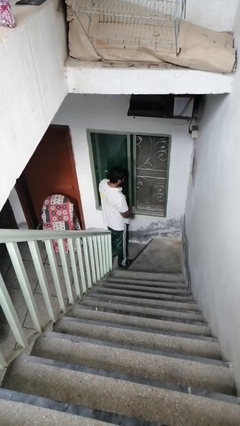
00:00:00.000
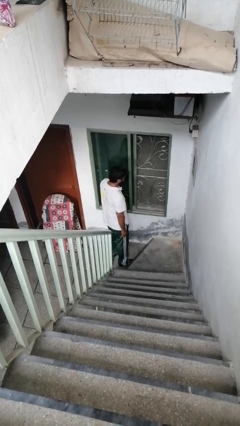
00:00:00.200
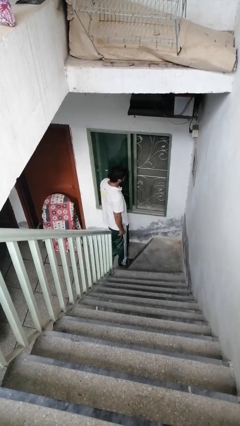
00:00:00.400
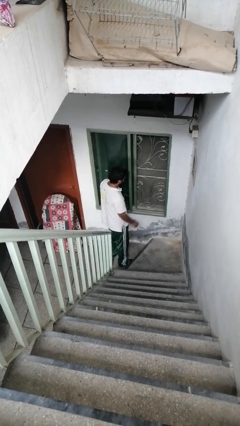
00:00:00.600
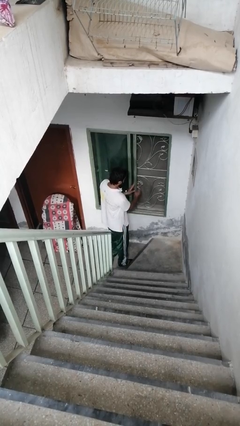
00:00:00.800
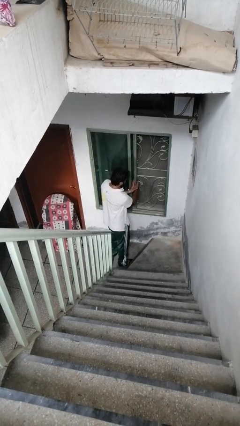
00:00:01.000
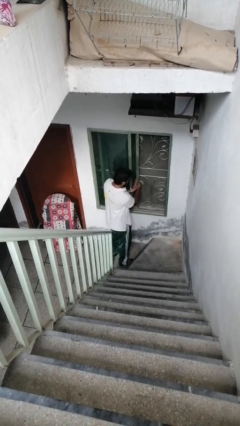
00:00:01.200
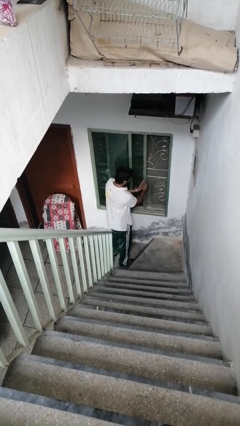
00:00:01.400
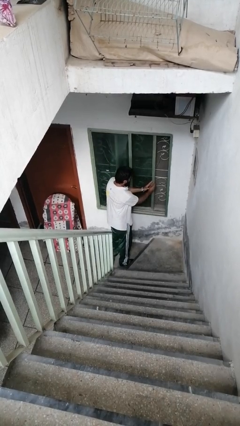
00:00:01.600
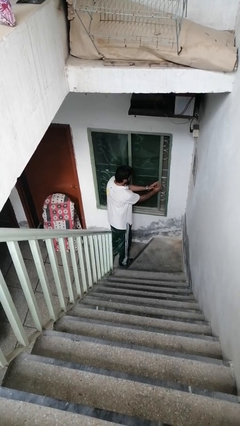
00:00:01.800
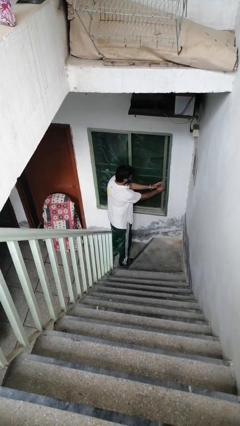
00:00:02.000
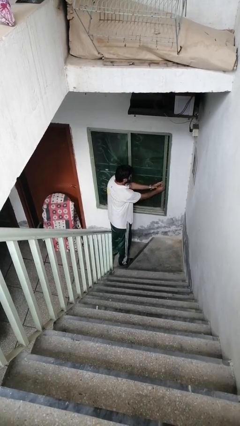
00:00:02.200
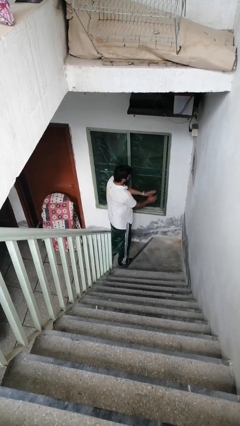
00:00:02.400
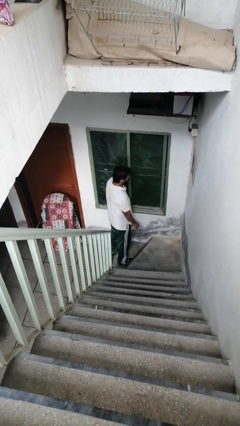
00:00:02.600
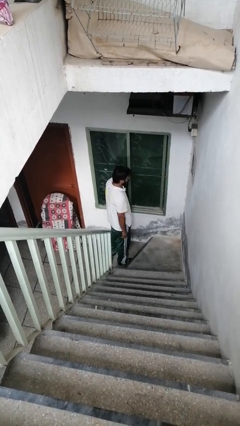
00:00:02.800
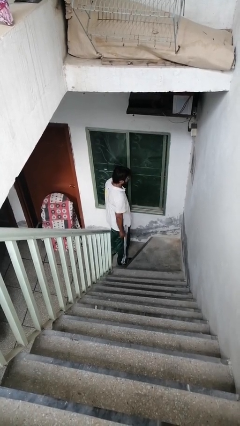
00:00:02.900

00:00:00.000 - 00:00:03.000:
person closes home window

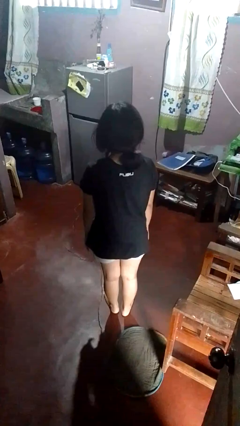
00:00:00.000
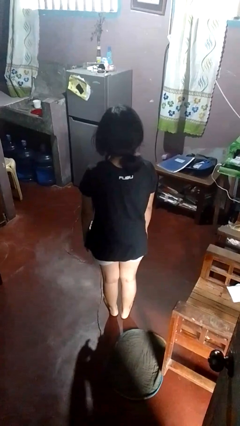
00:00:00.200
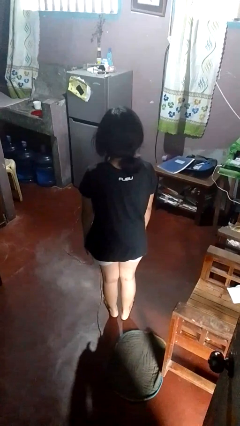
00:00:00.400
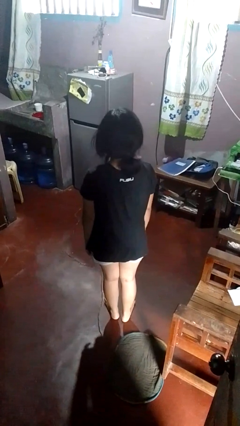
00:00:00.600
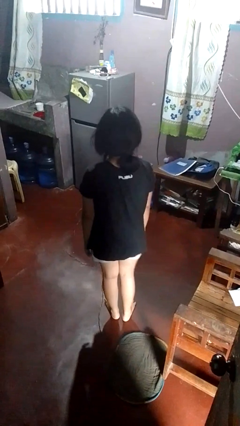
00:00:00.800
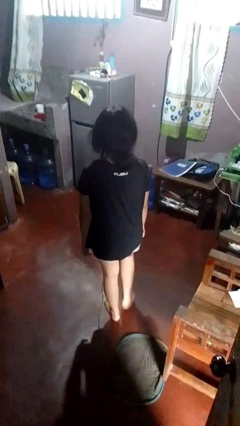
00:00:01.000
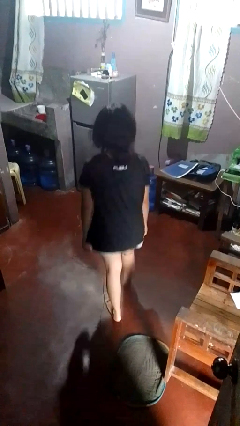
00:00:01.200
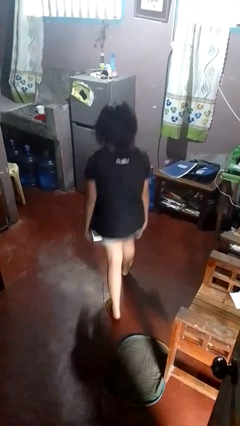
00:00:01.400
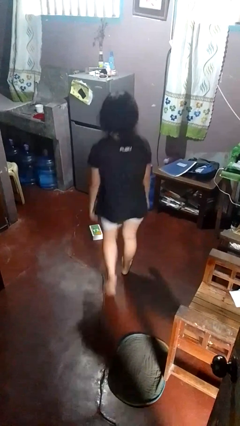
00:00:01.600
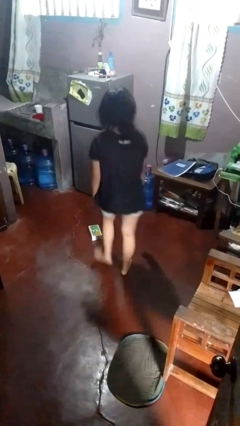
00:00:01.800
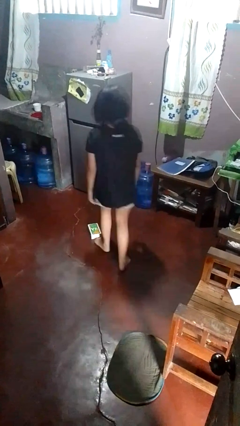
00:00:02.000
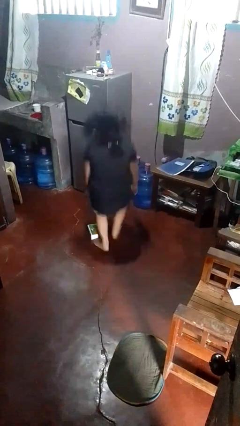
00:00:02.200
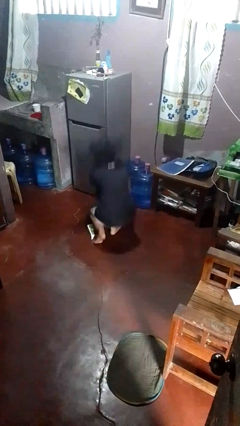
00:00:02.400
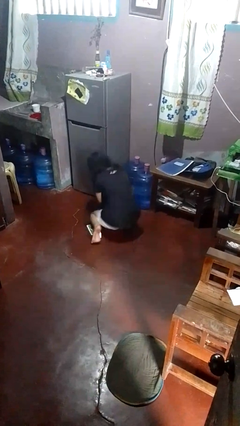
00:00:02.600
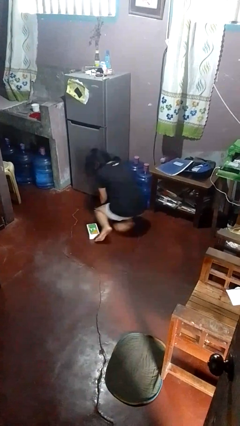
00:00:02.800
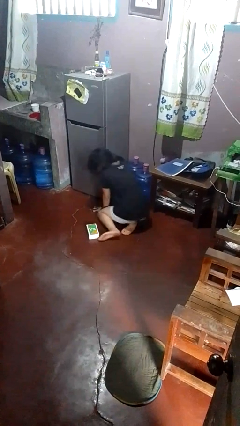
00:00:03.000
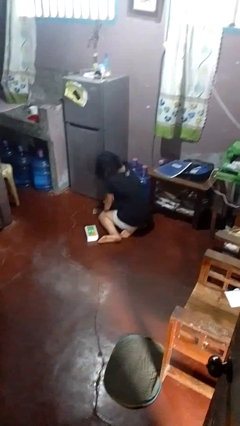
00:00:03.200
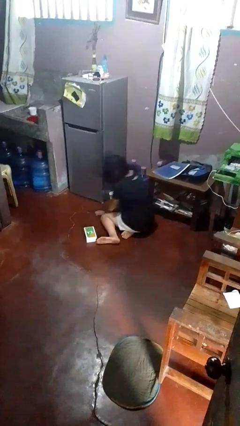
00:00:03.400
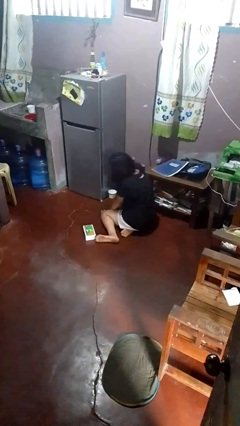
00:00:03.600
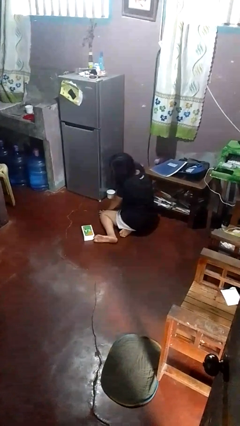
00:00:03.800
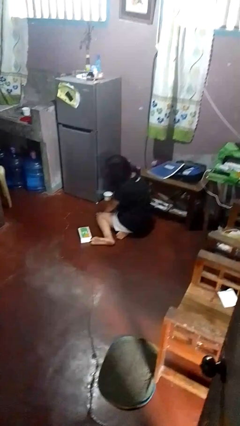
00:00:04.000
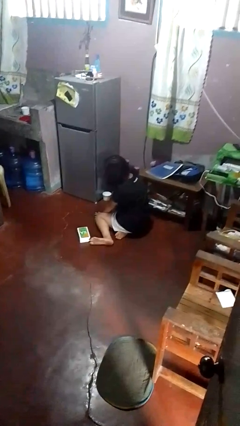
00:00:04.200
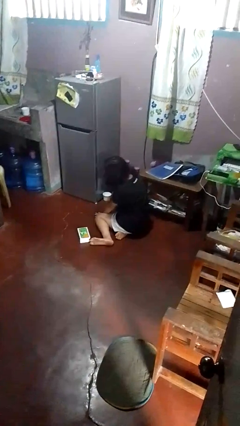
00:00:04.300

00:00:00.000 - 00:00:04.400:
person trips on object on floor

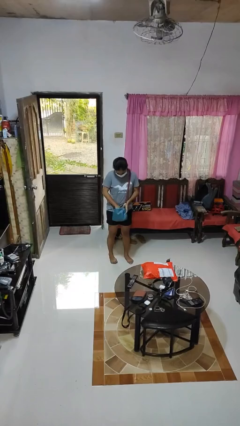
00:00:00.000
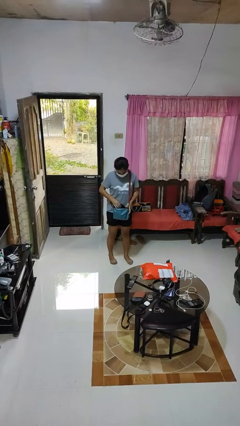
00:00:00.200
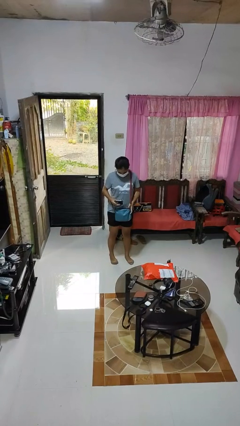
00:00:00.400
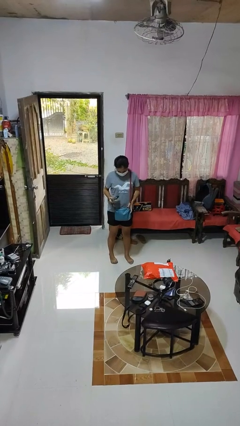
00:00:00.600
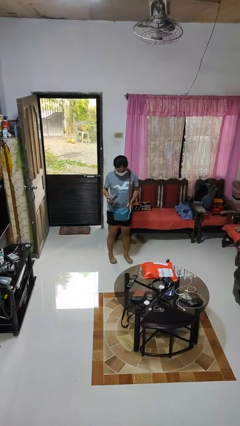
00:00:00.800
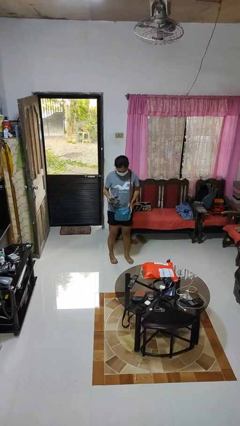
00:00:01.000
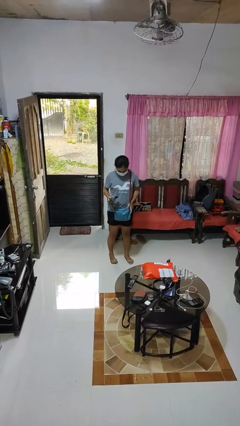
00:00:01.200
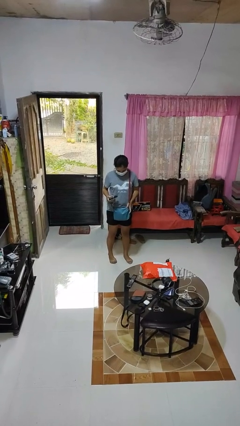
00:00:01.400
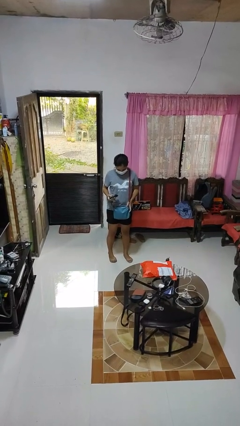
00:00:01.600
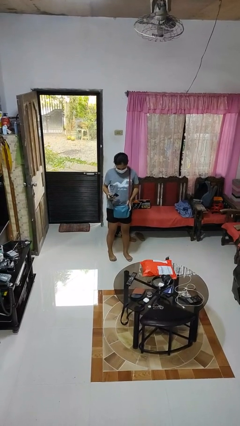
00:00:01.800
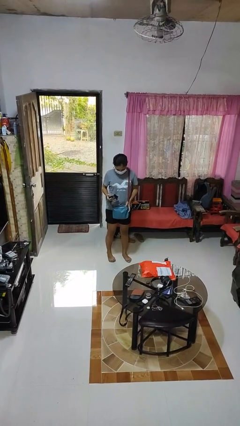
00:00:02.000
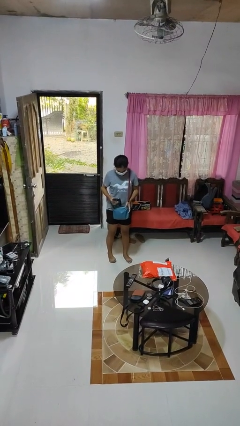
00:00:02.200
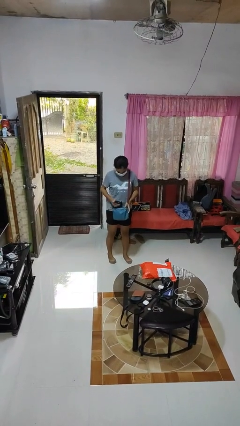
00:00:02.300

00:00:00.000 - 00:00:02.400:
person takes object from purse

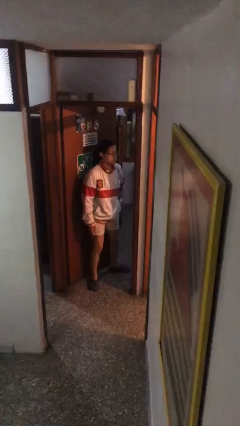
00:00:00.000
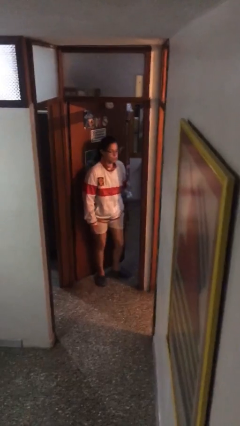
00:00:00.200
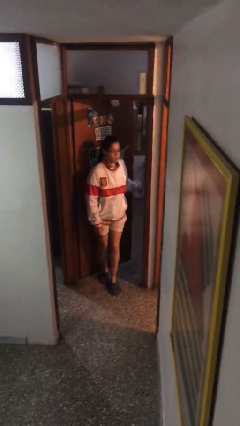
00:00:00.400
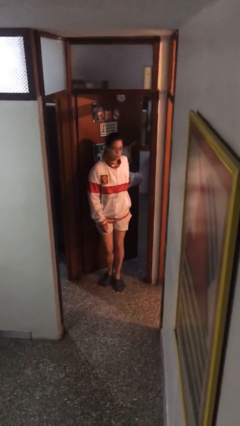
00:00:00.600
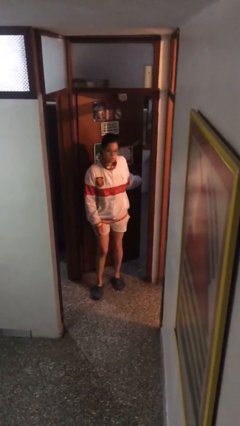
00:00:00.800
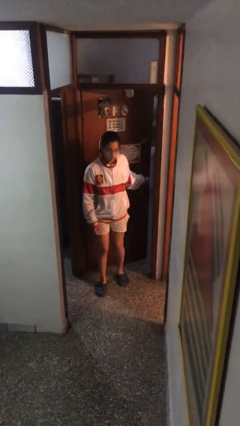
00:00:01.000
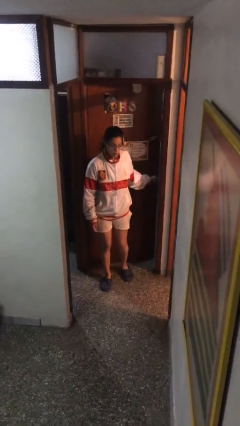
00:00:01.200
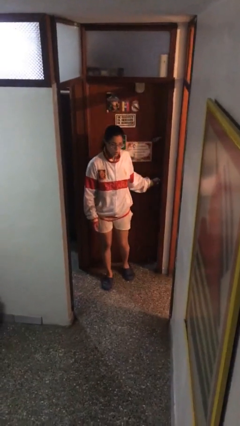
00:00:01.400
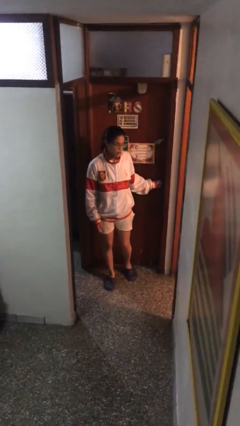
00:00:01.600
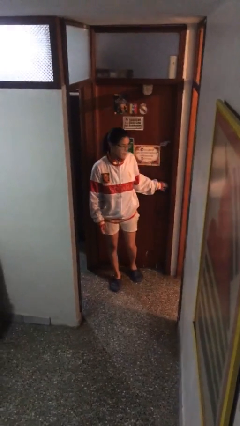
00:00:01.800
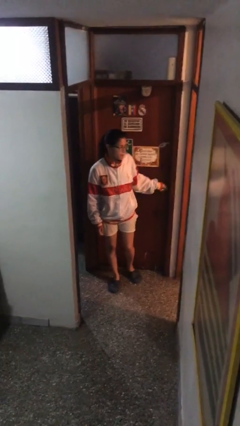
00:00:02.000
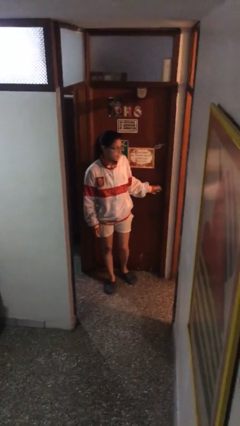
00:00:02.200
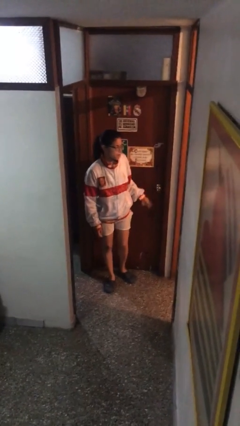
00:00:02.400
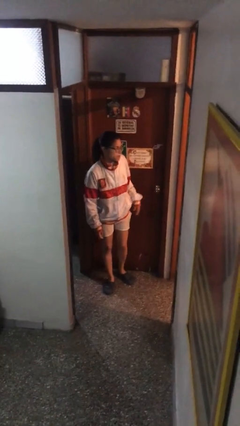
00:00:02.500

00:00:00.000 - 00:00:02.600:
person closes facility door

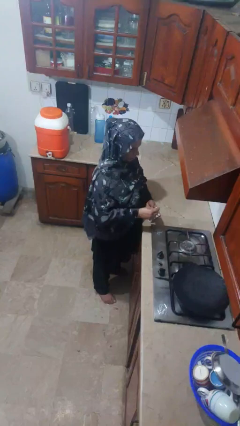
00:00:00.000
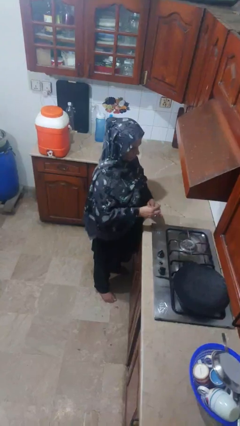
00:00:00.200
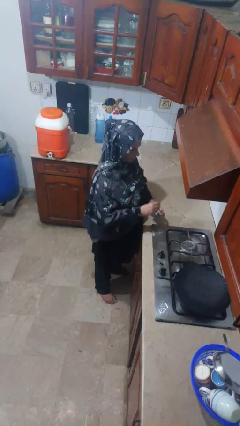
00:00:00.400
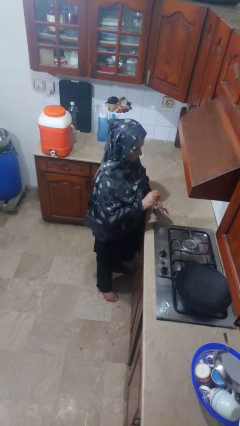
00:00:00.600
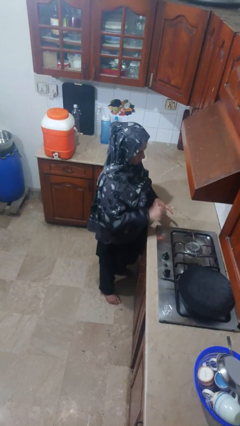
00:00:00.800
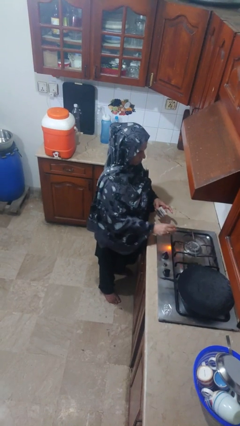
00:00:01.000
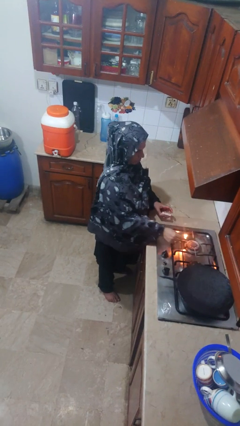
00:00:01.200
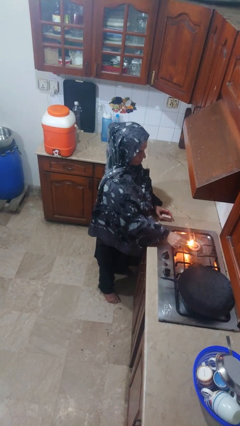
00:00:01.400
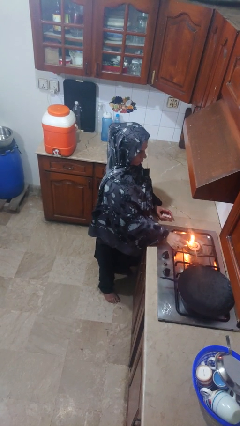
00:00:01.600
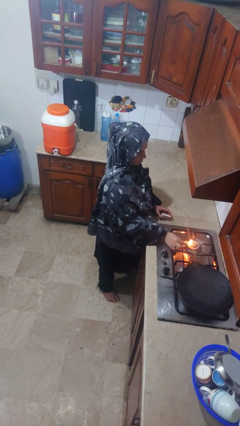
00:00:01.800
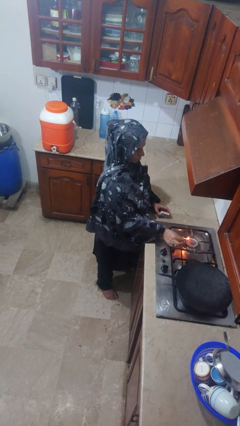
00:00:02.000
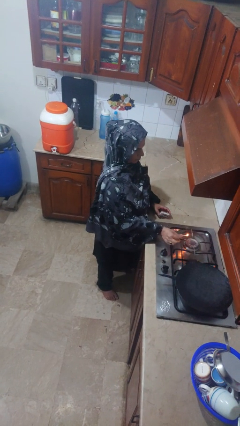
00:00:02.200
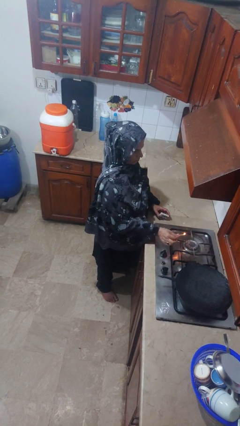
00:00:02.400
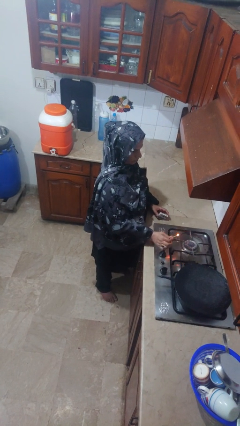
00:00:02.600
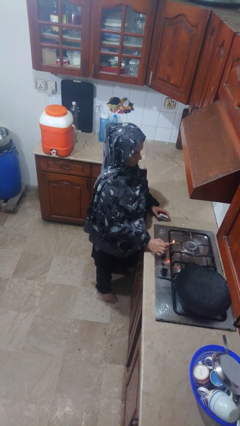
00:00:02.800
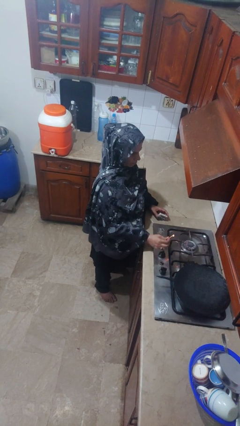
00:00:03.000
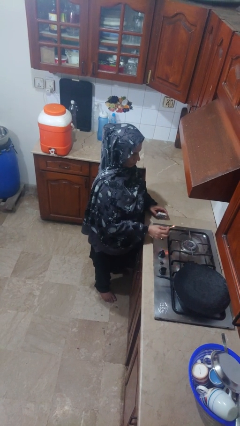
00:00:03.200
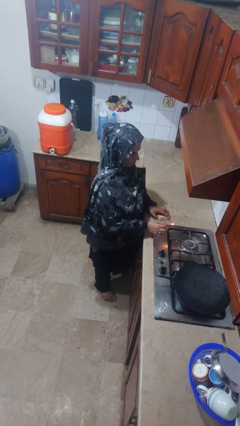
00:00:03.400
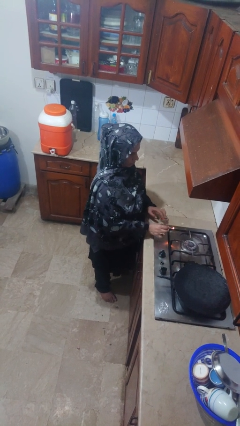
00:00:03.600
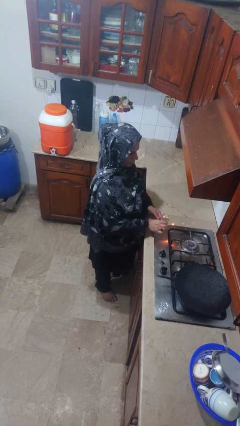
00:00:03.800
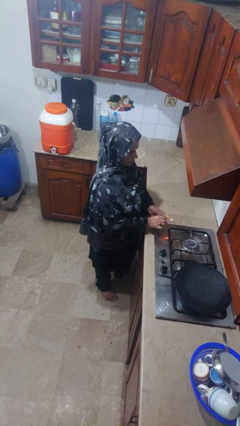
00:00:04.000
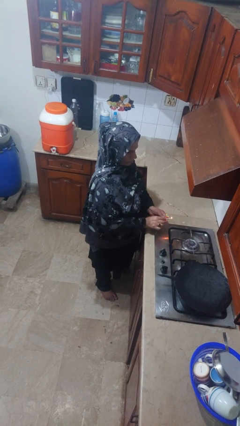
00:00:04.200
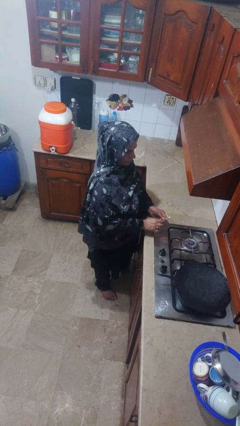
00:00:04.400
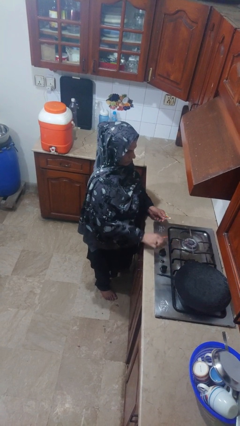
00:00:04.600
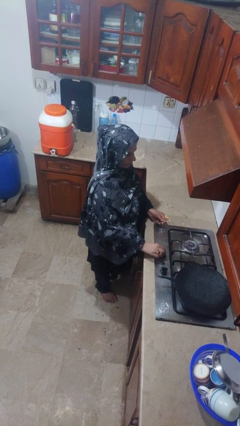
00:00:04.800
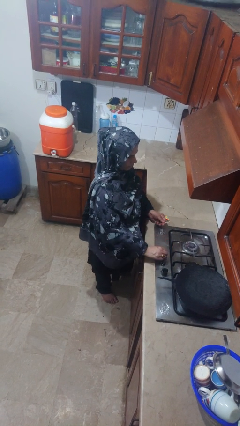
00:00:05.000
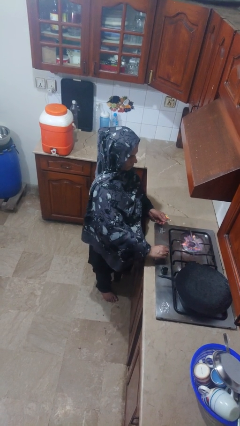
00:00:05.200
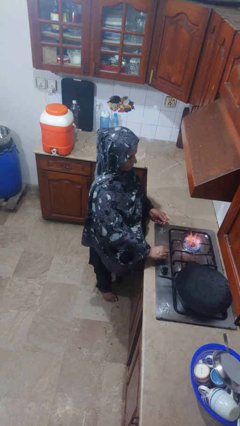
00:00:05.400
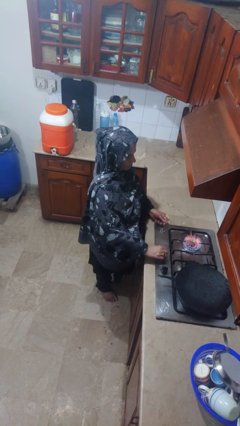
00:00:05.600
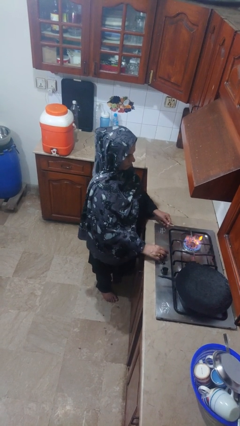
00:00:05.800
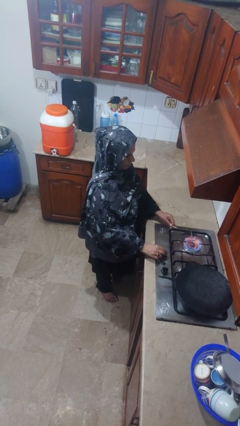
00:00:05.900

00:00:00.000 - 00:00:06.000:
person turns on stovetop
